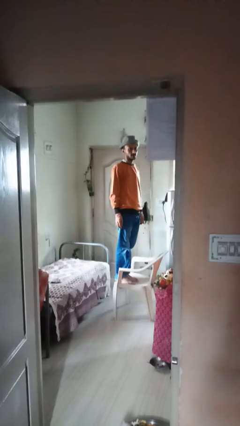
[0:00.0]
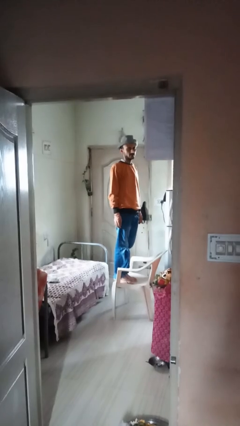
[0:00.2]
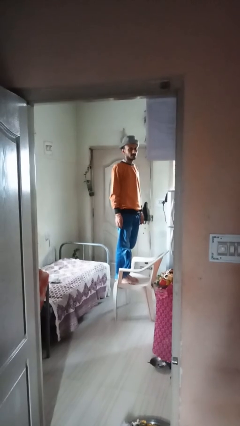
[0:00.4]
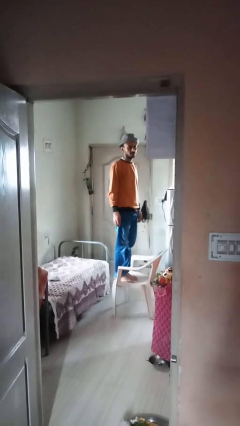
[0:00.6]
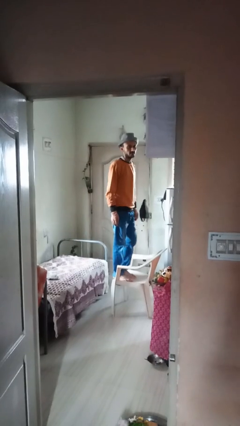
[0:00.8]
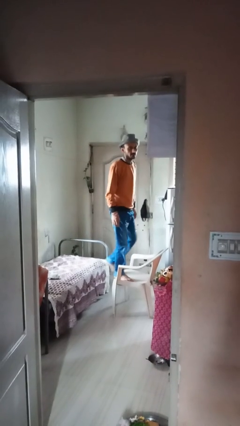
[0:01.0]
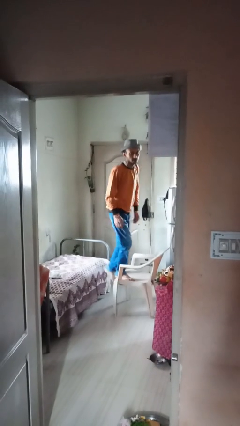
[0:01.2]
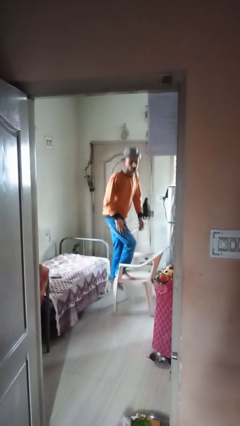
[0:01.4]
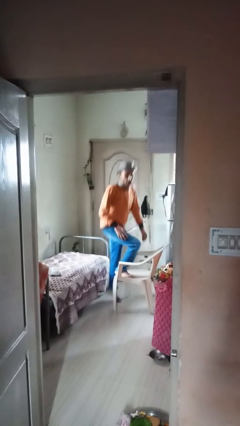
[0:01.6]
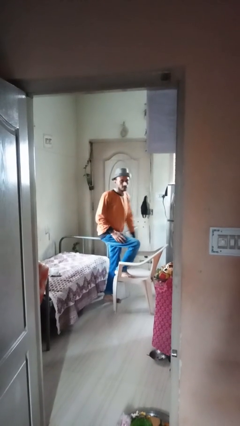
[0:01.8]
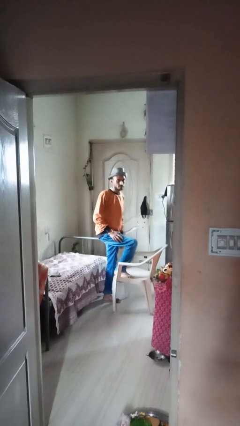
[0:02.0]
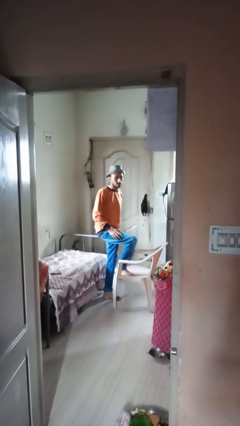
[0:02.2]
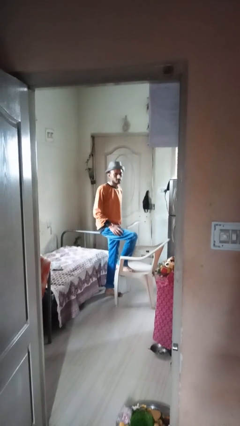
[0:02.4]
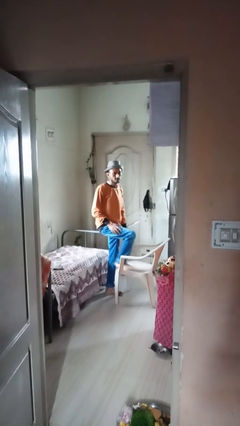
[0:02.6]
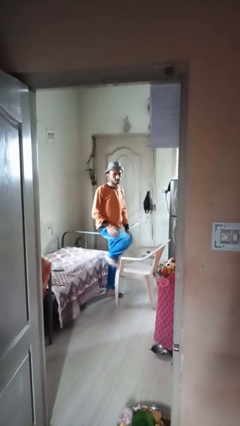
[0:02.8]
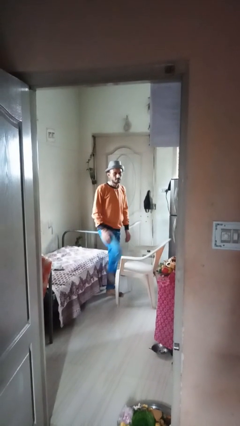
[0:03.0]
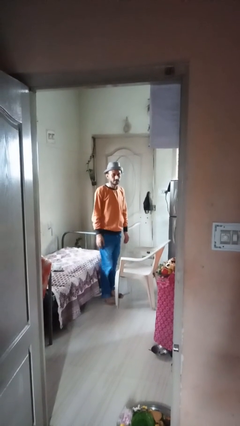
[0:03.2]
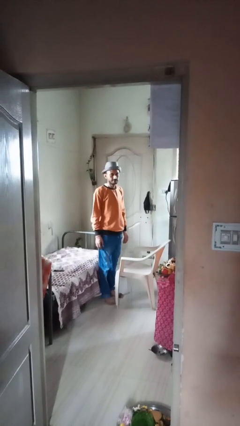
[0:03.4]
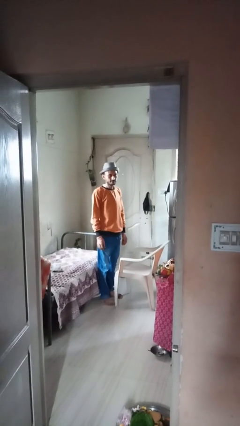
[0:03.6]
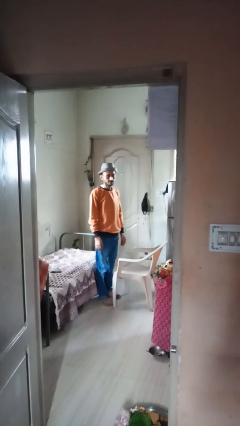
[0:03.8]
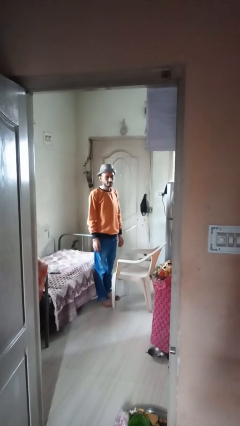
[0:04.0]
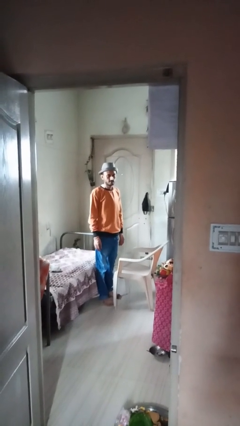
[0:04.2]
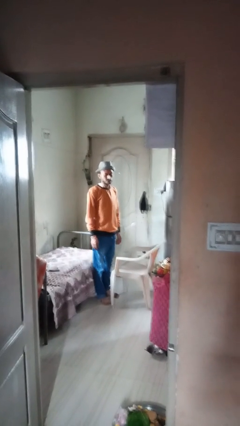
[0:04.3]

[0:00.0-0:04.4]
person climbs off chair

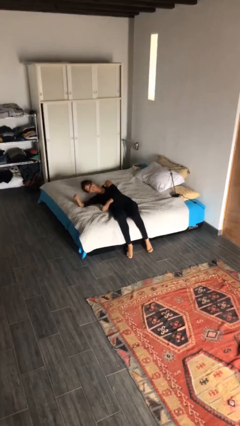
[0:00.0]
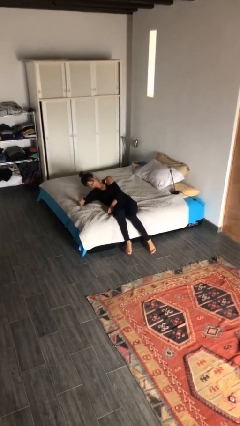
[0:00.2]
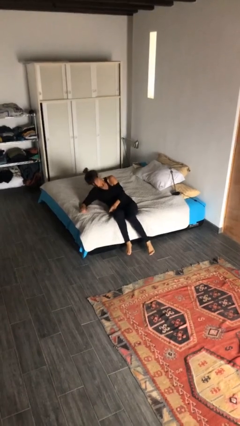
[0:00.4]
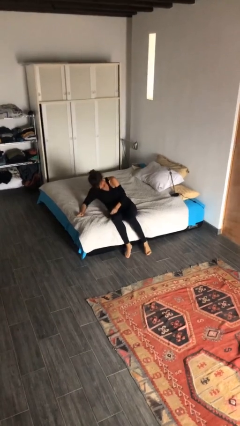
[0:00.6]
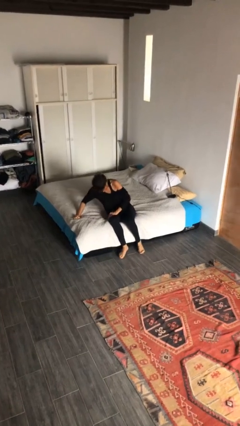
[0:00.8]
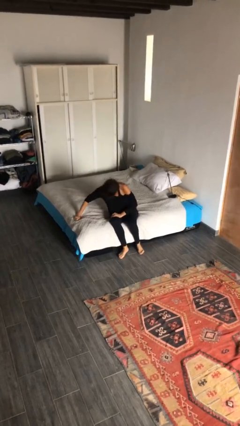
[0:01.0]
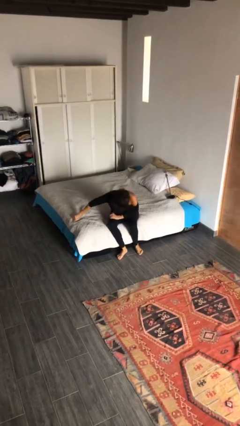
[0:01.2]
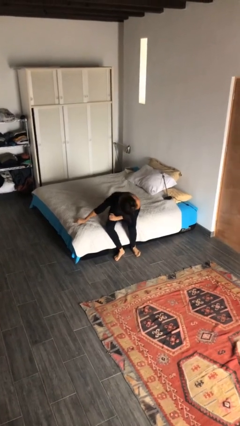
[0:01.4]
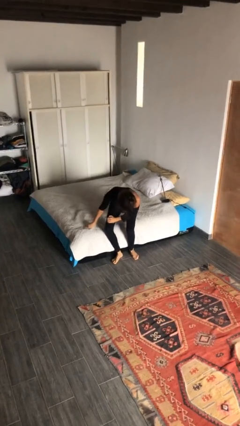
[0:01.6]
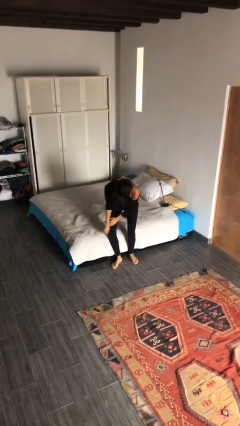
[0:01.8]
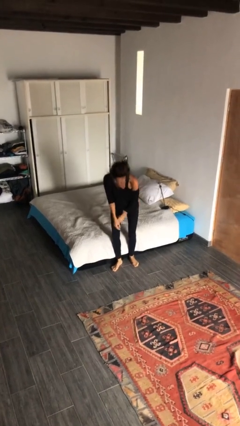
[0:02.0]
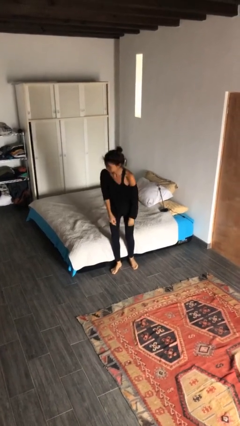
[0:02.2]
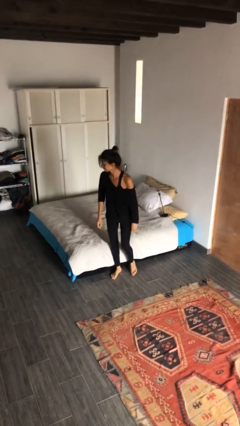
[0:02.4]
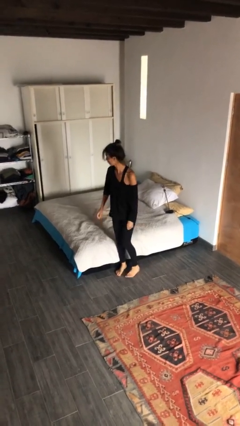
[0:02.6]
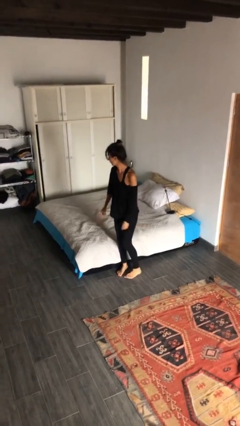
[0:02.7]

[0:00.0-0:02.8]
person stands up

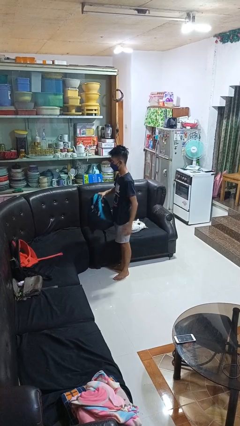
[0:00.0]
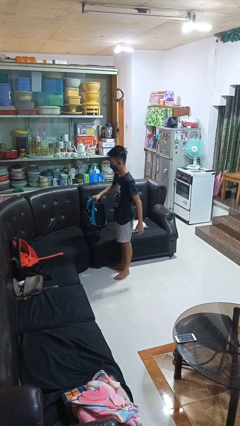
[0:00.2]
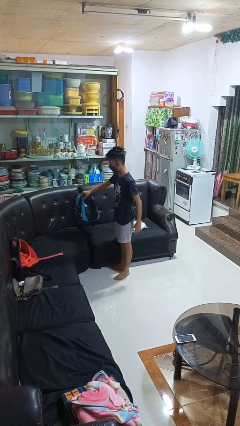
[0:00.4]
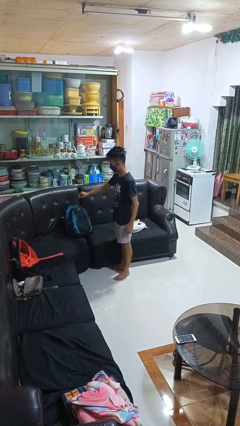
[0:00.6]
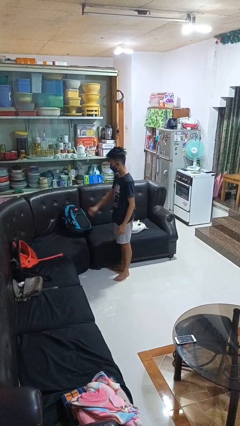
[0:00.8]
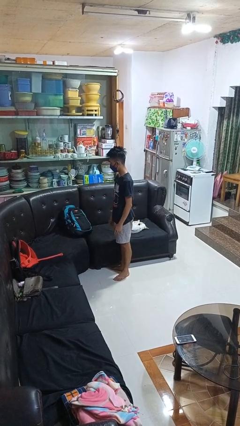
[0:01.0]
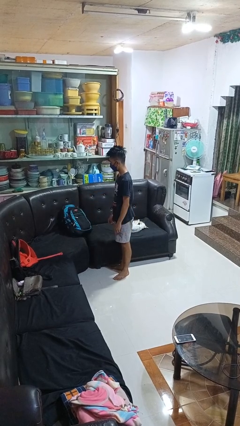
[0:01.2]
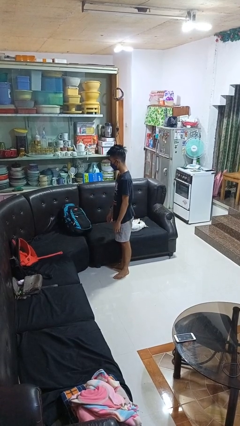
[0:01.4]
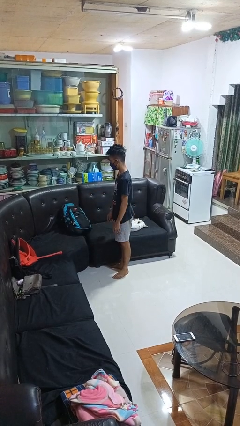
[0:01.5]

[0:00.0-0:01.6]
person puts down object on couch

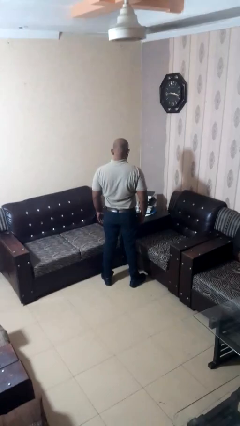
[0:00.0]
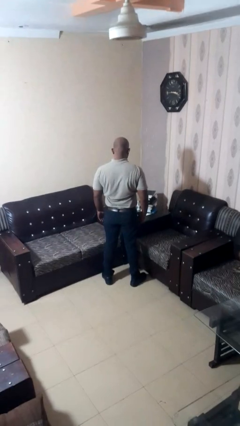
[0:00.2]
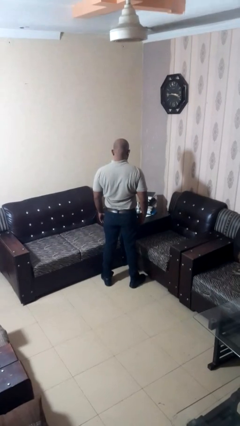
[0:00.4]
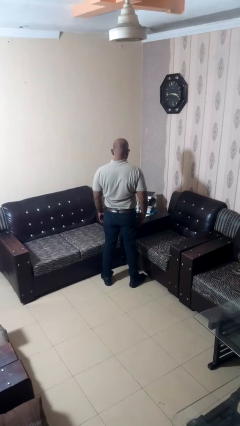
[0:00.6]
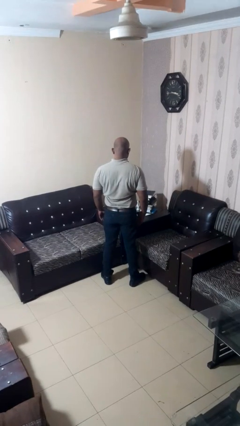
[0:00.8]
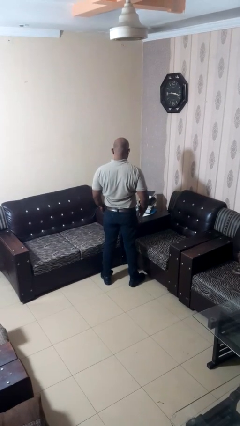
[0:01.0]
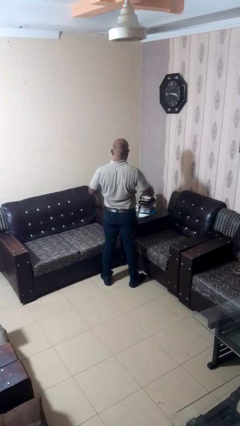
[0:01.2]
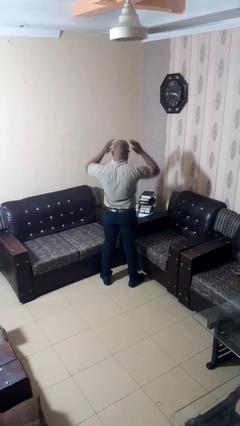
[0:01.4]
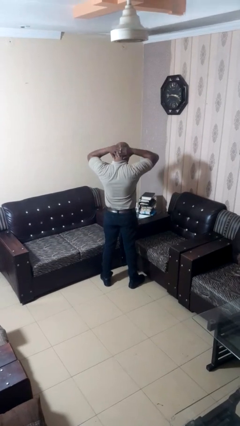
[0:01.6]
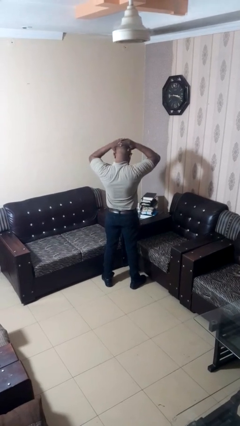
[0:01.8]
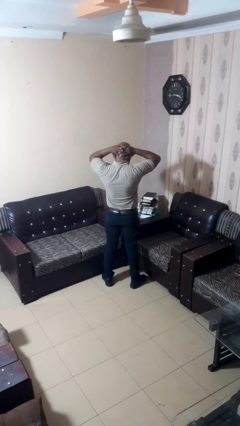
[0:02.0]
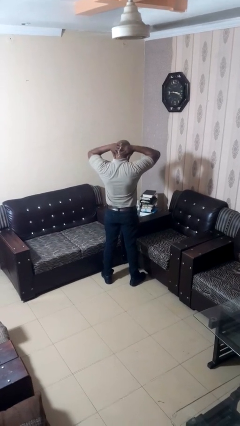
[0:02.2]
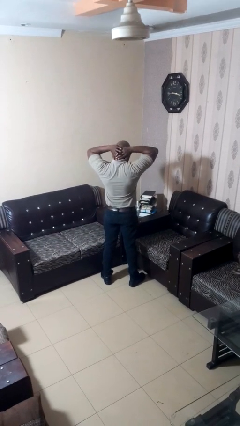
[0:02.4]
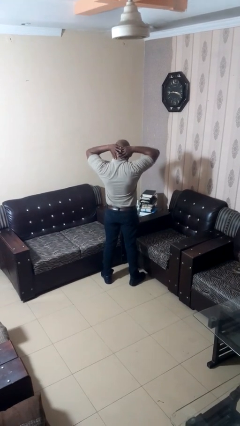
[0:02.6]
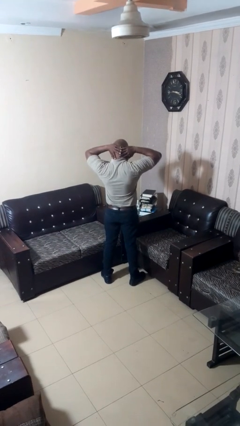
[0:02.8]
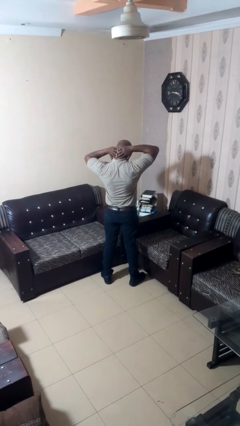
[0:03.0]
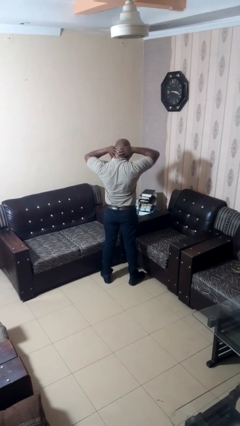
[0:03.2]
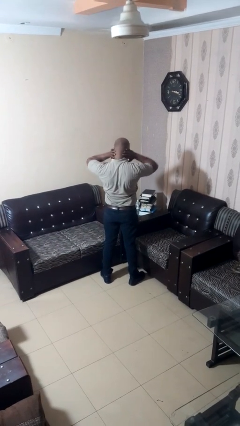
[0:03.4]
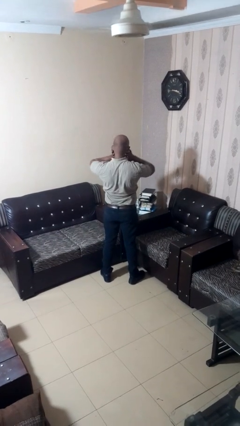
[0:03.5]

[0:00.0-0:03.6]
person rubs neck

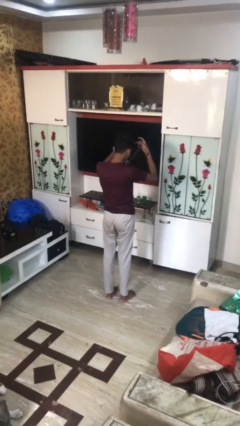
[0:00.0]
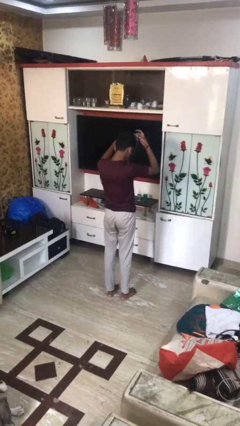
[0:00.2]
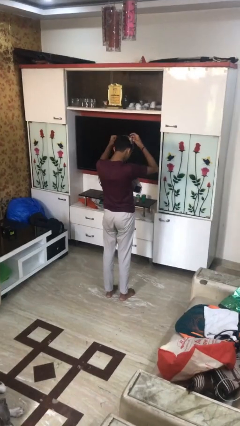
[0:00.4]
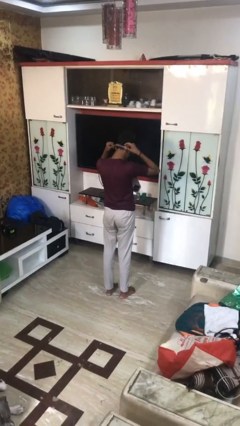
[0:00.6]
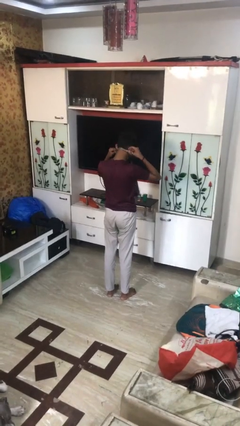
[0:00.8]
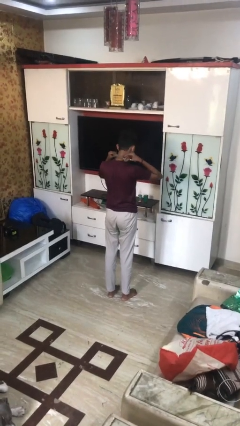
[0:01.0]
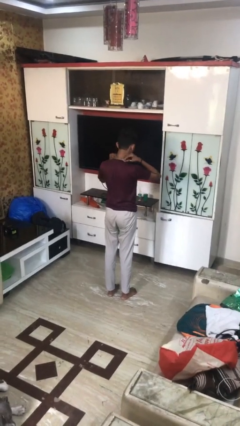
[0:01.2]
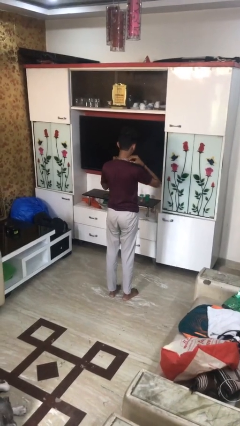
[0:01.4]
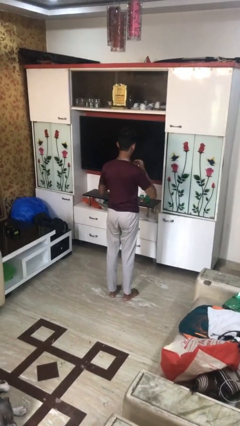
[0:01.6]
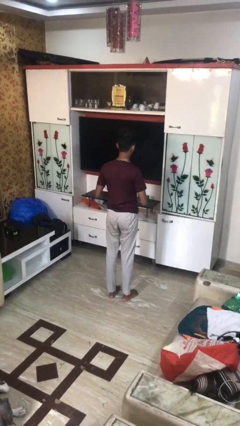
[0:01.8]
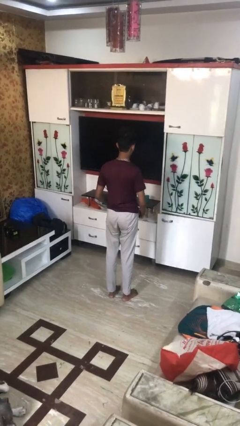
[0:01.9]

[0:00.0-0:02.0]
person puts on necktie

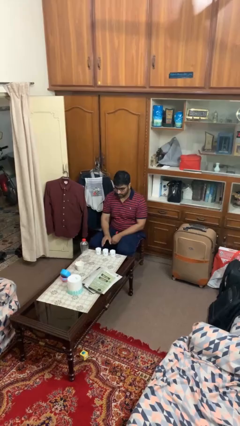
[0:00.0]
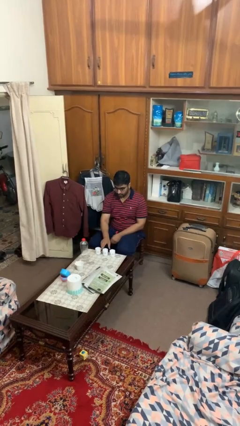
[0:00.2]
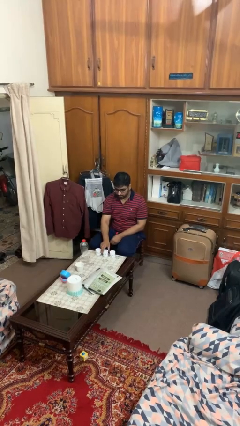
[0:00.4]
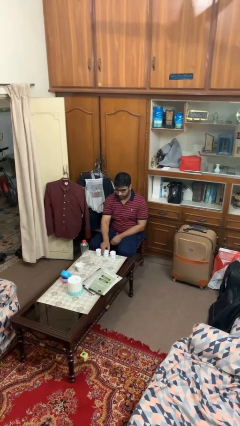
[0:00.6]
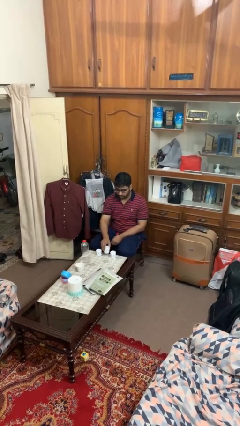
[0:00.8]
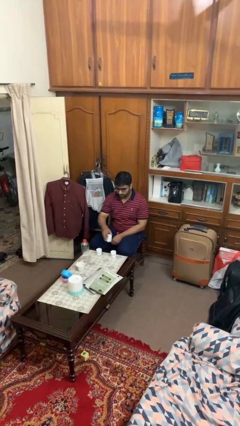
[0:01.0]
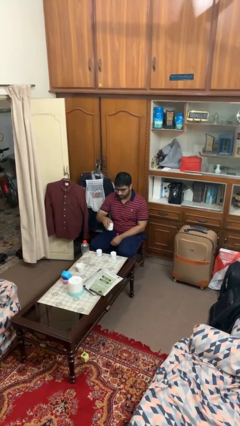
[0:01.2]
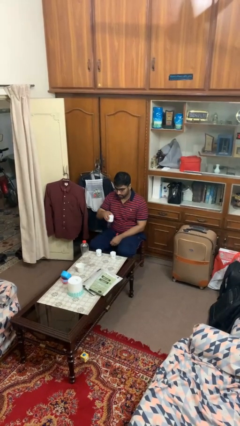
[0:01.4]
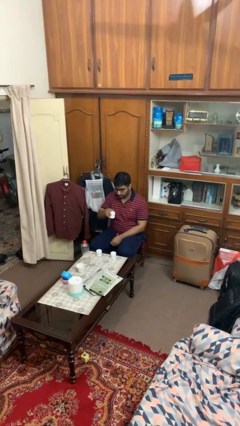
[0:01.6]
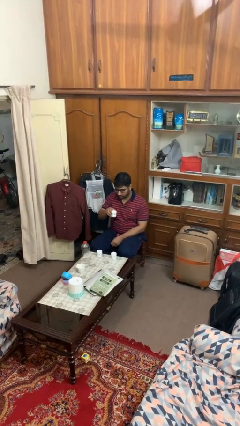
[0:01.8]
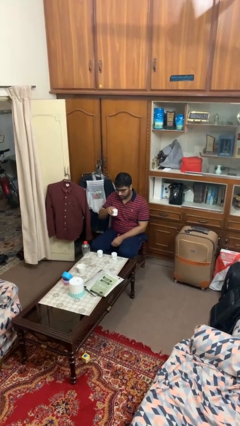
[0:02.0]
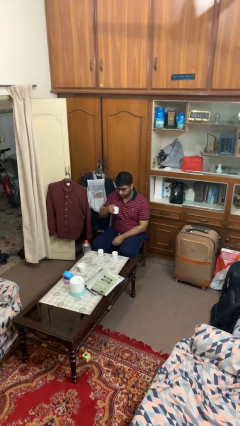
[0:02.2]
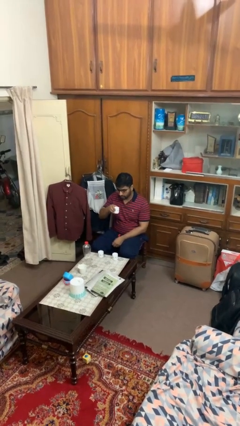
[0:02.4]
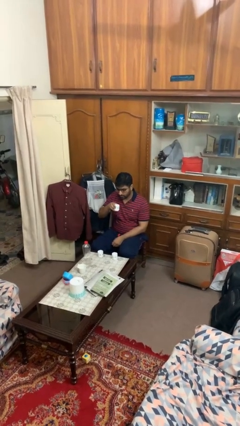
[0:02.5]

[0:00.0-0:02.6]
person picks up object from table

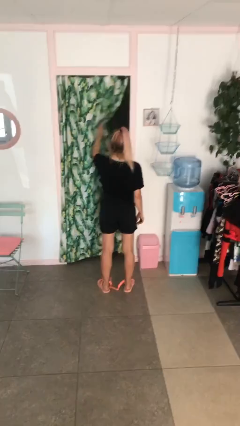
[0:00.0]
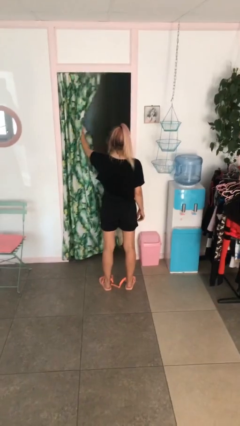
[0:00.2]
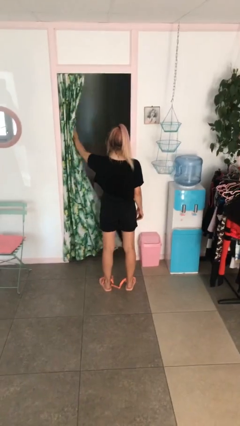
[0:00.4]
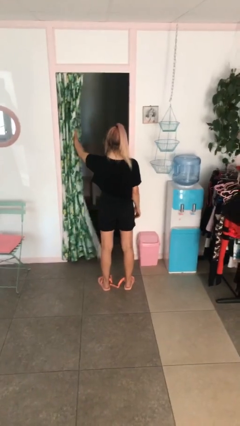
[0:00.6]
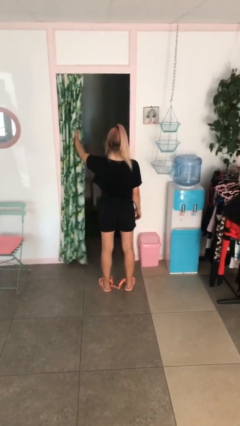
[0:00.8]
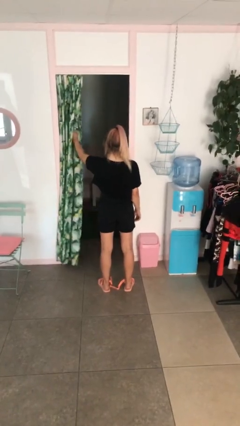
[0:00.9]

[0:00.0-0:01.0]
person opens sliding door
